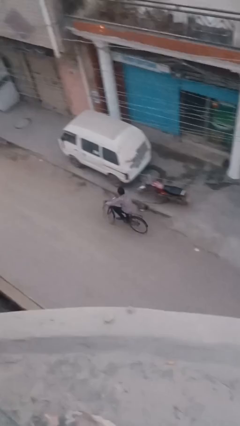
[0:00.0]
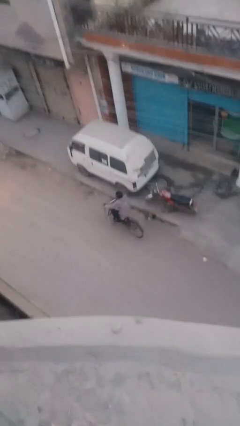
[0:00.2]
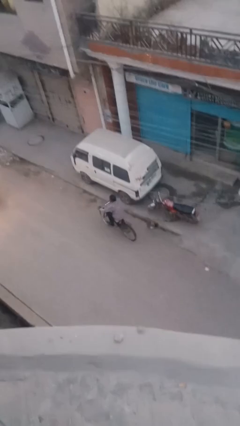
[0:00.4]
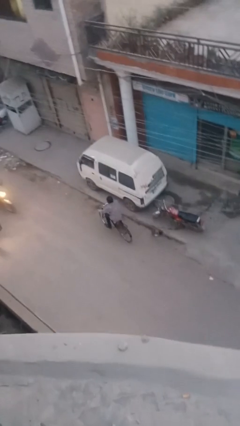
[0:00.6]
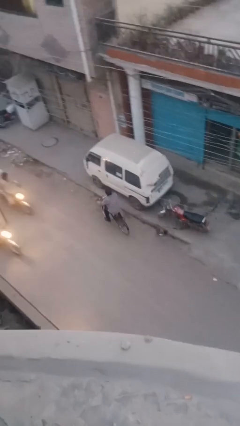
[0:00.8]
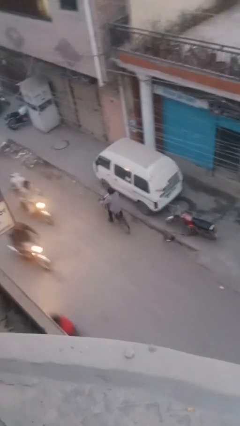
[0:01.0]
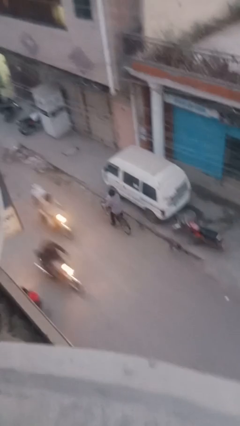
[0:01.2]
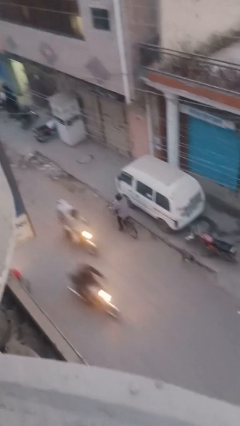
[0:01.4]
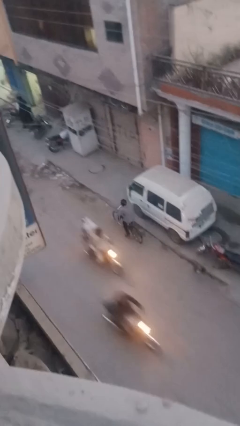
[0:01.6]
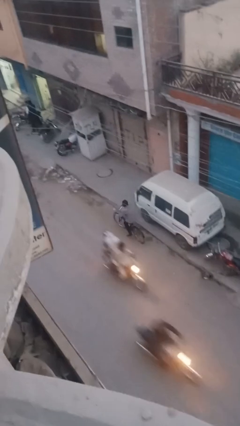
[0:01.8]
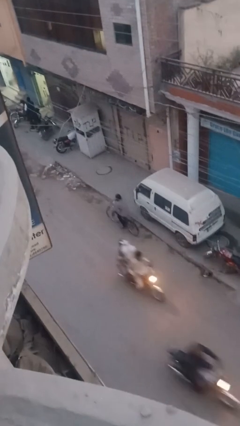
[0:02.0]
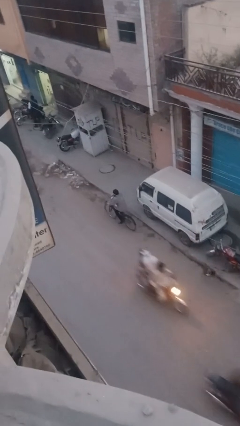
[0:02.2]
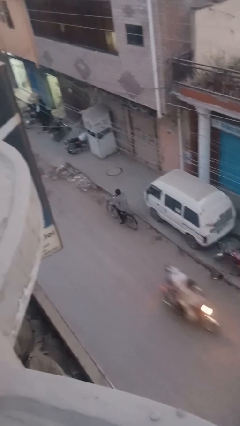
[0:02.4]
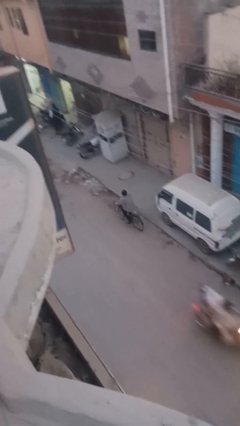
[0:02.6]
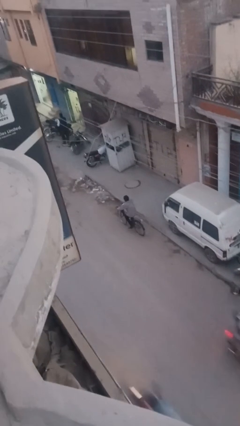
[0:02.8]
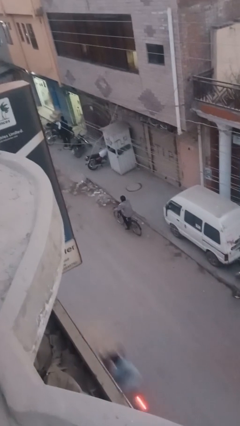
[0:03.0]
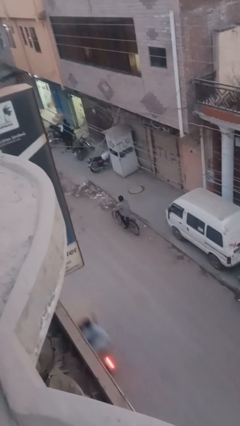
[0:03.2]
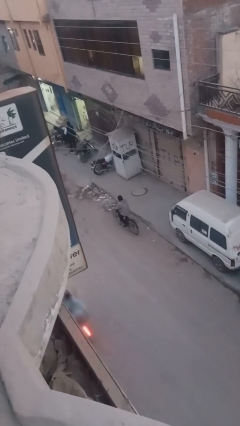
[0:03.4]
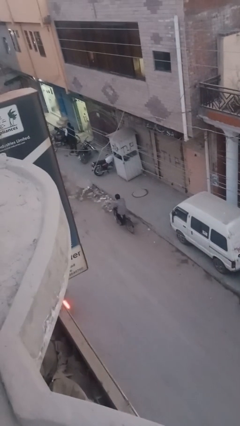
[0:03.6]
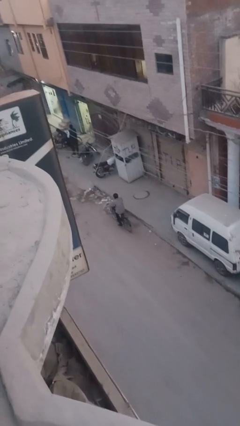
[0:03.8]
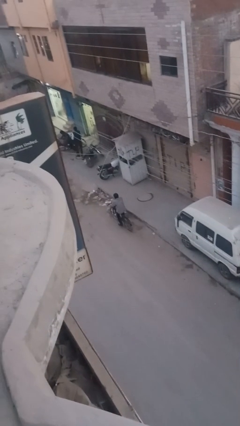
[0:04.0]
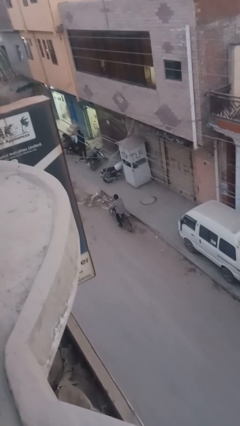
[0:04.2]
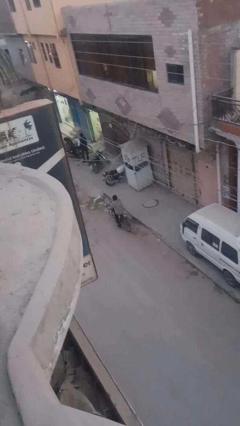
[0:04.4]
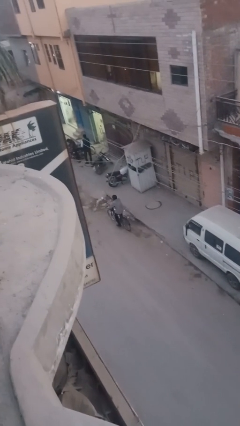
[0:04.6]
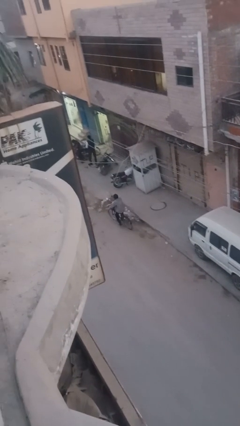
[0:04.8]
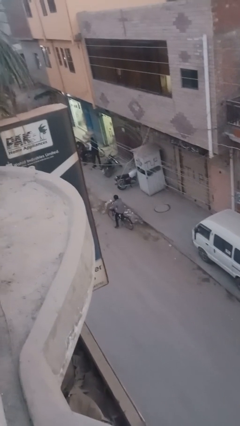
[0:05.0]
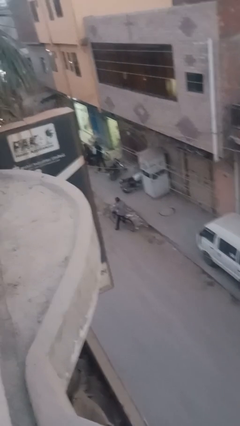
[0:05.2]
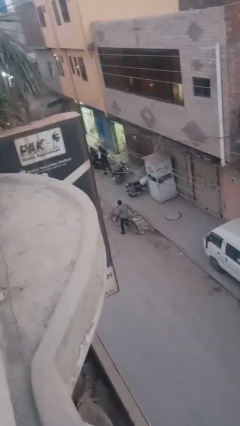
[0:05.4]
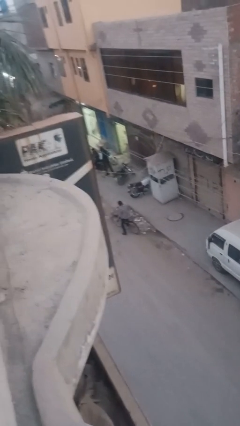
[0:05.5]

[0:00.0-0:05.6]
person rides bicycle

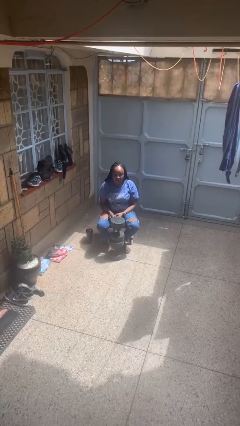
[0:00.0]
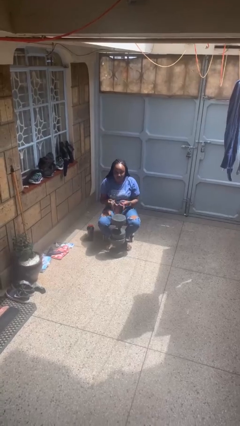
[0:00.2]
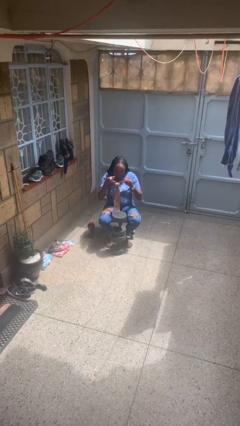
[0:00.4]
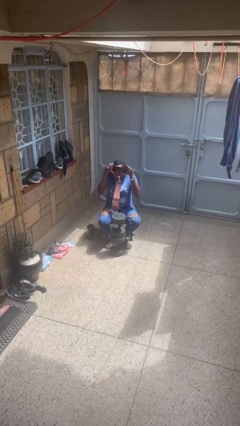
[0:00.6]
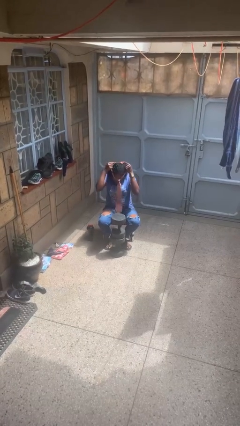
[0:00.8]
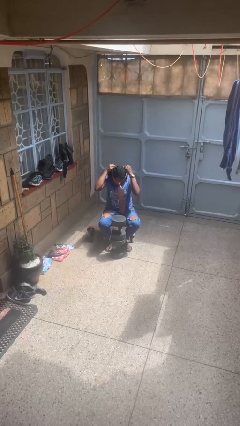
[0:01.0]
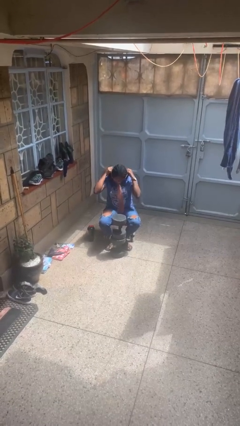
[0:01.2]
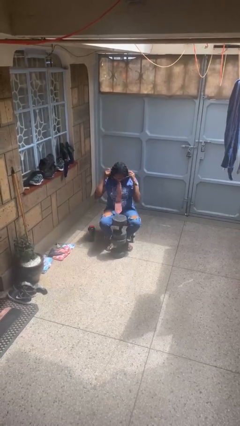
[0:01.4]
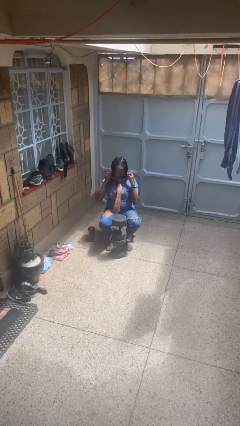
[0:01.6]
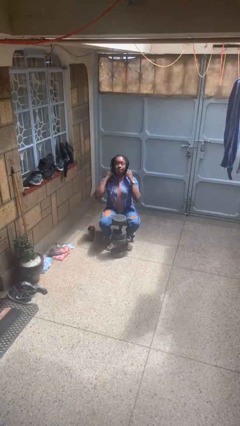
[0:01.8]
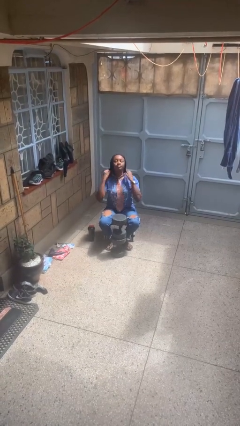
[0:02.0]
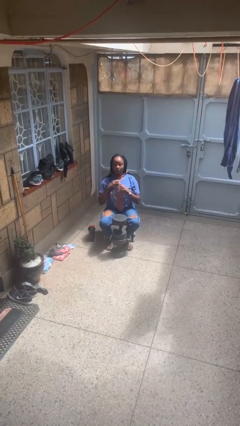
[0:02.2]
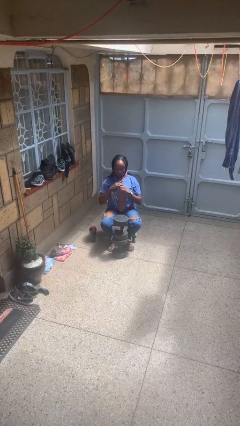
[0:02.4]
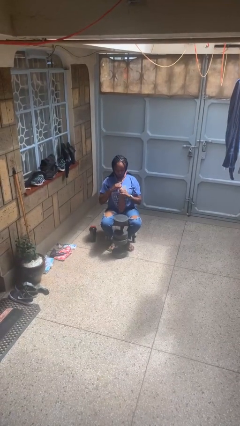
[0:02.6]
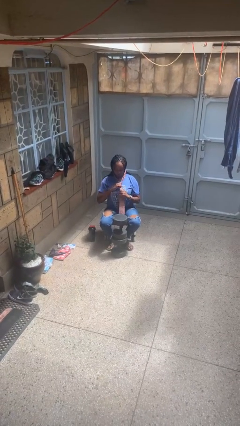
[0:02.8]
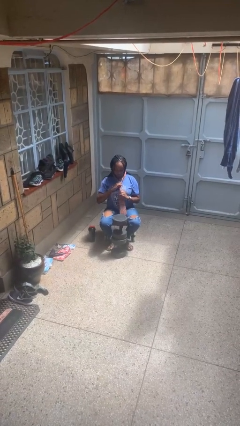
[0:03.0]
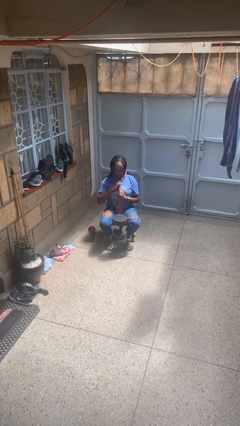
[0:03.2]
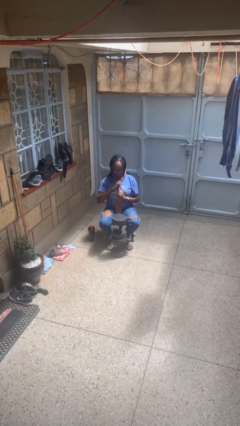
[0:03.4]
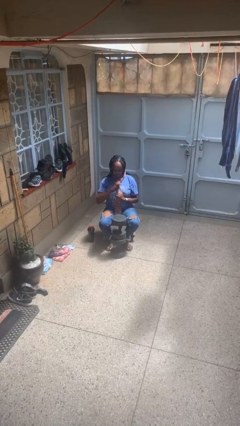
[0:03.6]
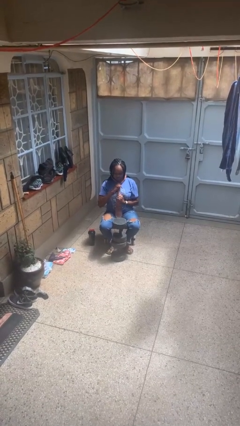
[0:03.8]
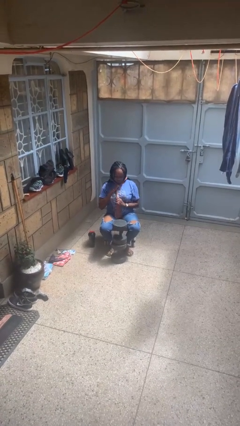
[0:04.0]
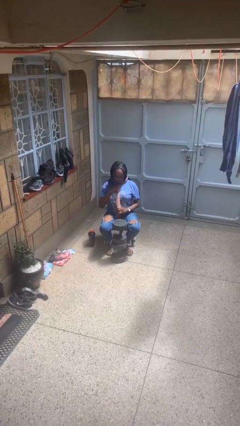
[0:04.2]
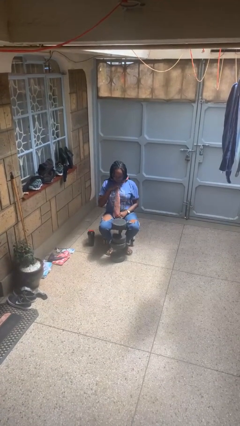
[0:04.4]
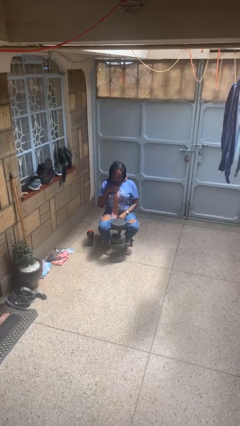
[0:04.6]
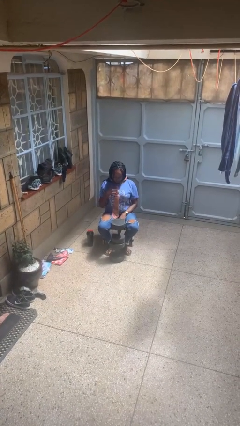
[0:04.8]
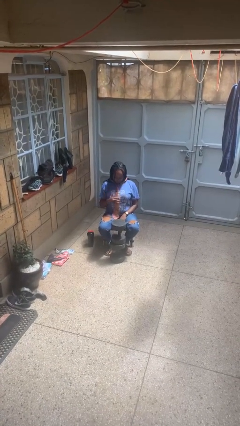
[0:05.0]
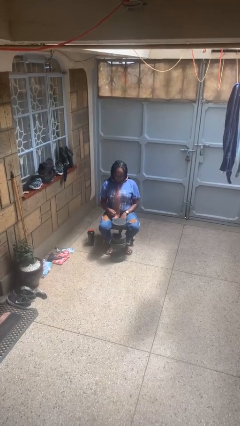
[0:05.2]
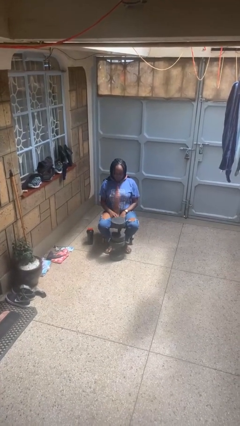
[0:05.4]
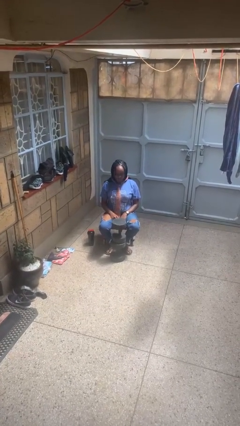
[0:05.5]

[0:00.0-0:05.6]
person puts on necktie

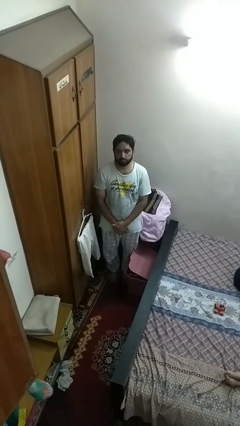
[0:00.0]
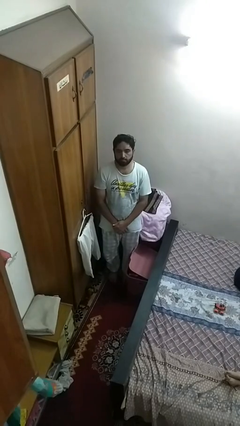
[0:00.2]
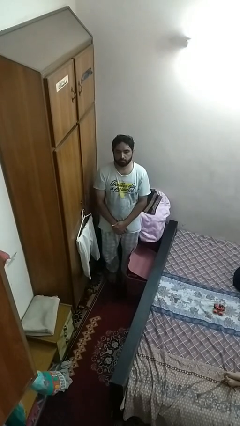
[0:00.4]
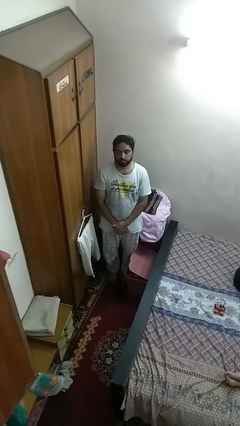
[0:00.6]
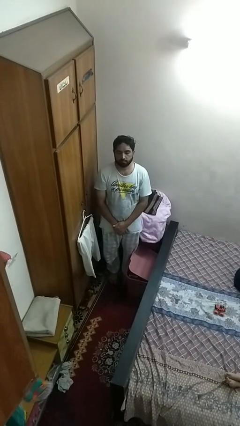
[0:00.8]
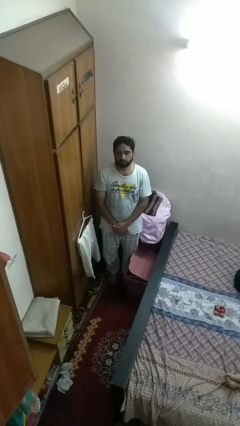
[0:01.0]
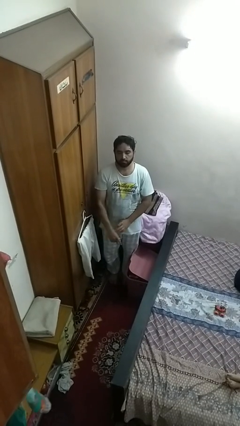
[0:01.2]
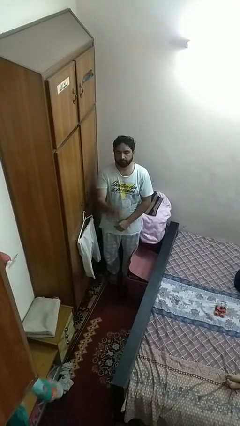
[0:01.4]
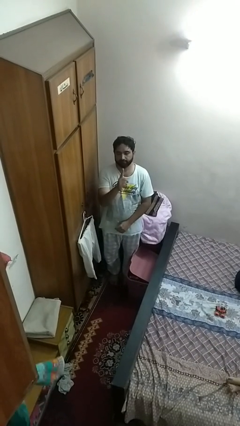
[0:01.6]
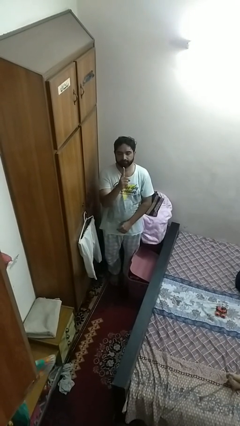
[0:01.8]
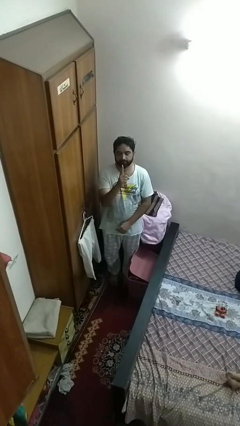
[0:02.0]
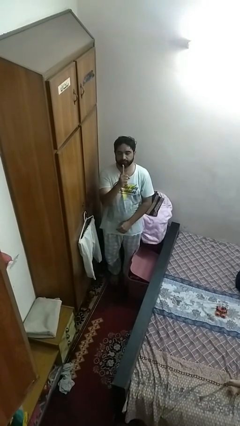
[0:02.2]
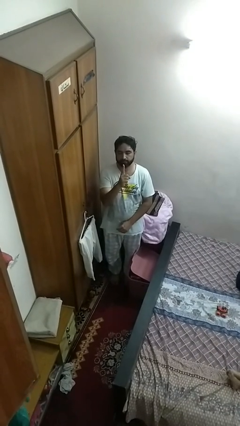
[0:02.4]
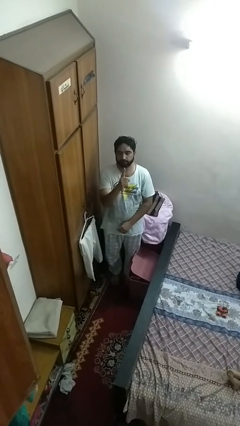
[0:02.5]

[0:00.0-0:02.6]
person gestures number one

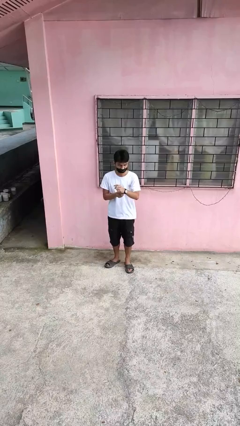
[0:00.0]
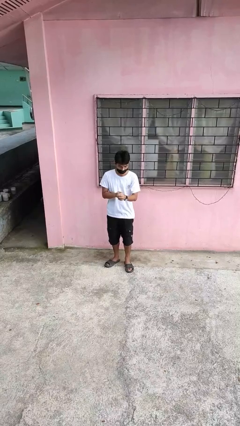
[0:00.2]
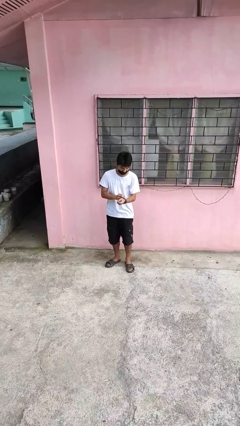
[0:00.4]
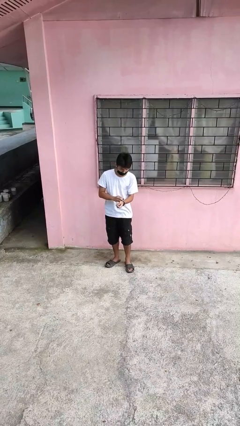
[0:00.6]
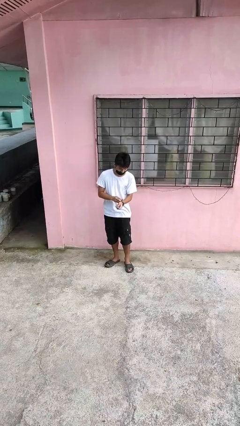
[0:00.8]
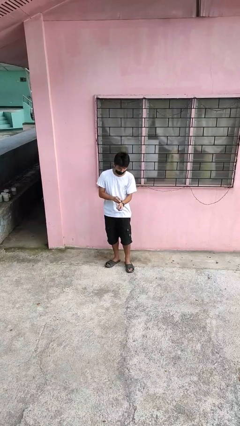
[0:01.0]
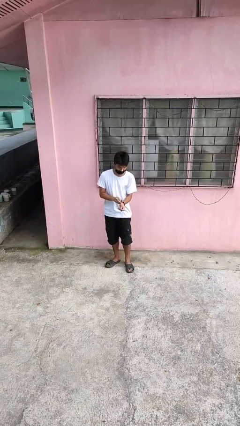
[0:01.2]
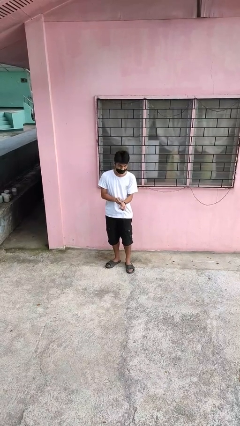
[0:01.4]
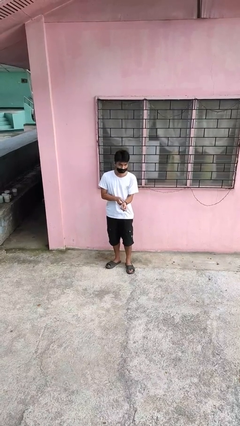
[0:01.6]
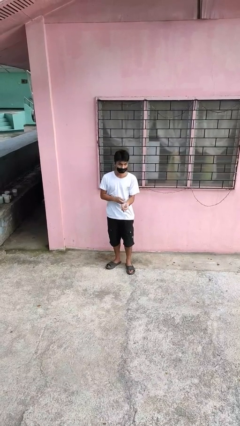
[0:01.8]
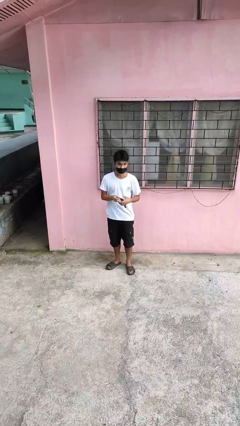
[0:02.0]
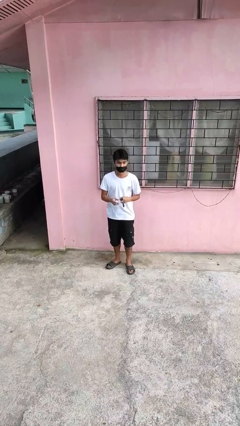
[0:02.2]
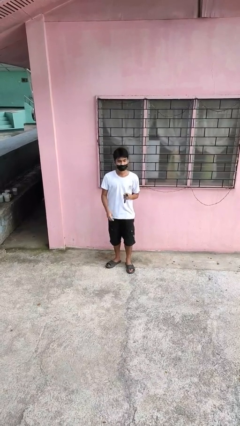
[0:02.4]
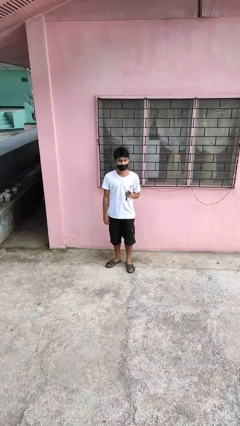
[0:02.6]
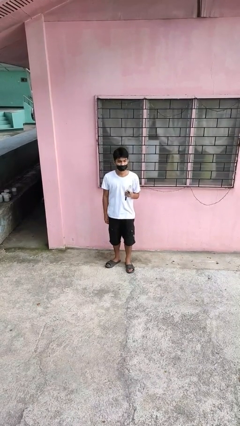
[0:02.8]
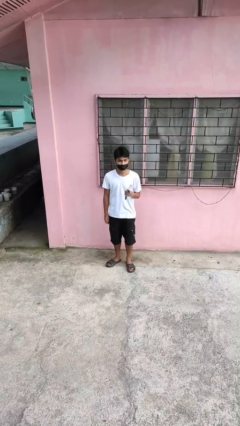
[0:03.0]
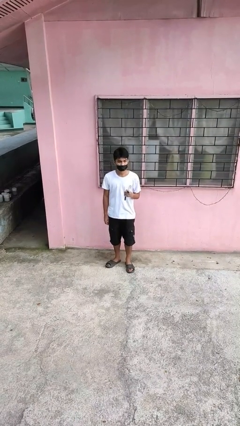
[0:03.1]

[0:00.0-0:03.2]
person takes off wristwatch

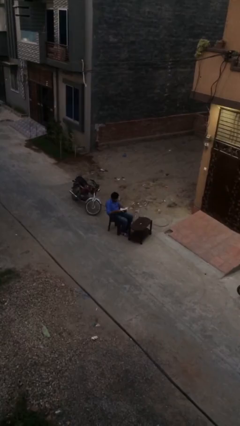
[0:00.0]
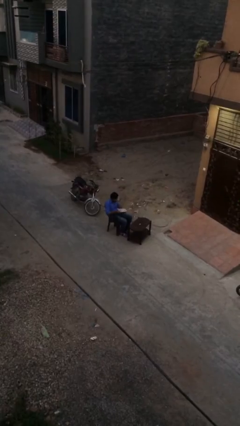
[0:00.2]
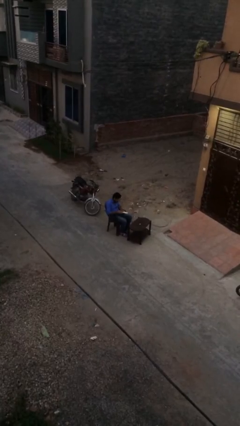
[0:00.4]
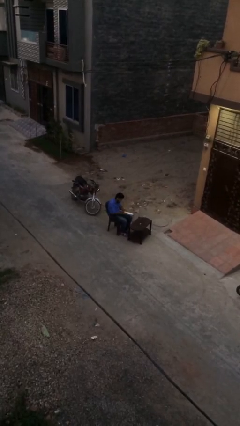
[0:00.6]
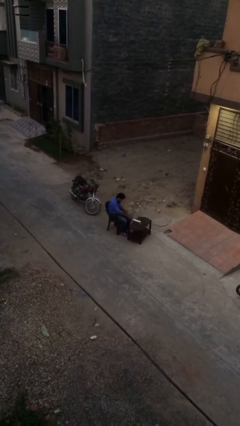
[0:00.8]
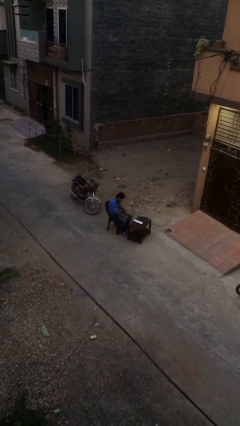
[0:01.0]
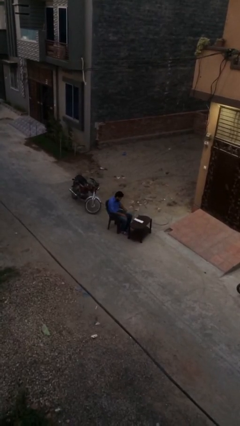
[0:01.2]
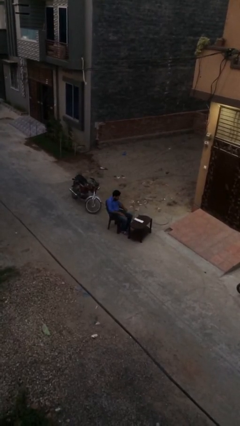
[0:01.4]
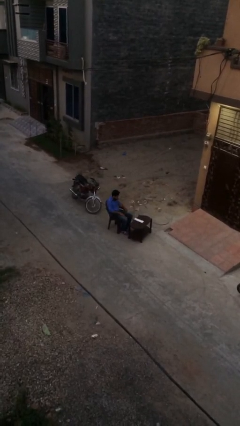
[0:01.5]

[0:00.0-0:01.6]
person puts down object on table
